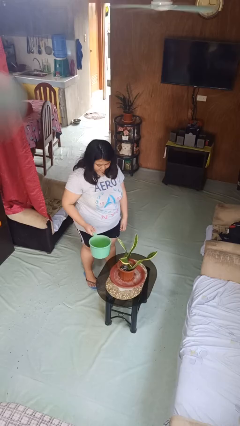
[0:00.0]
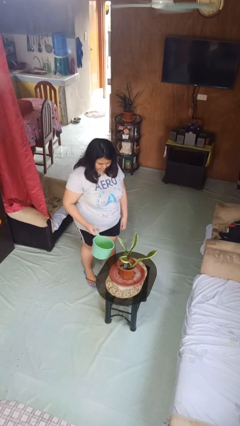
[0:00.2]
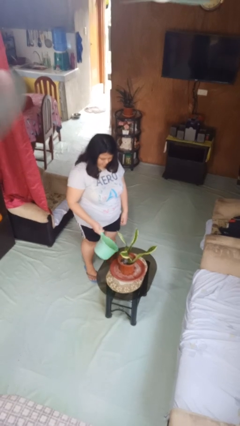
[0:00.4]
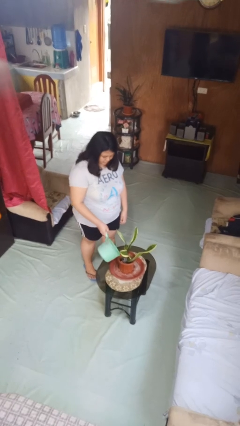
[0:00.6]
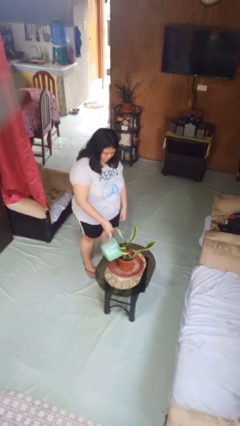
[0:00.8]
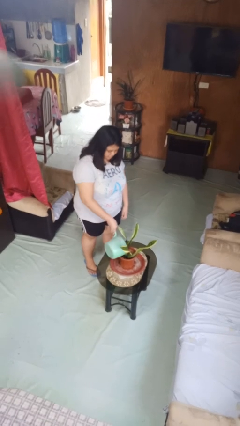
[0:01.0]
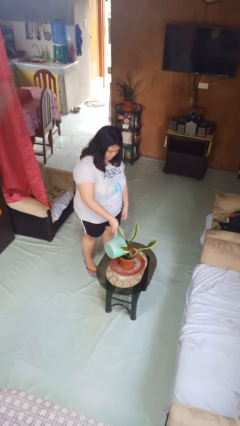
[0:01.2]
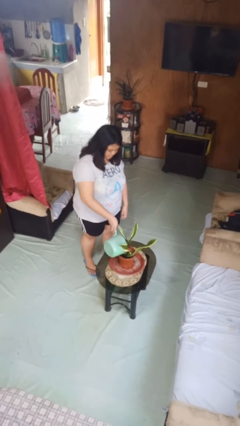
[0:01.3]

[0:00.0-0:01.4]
person waters houseplant

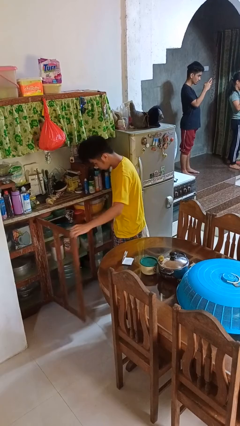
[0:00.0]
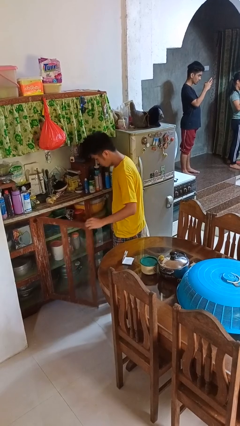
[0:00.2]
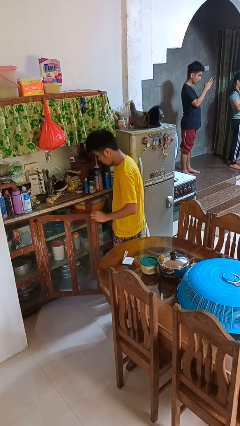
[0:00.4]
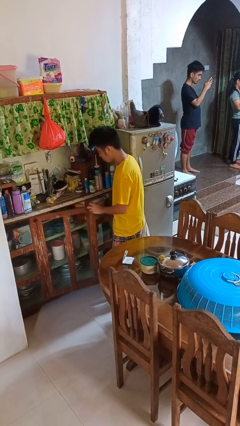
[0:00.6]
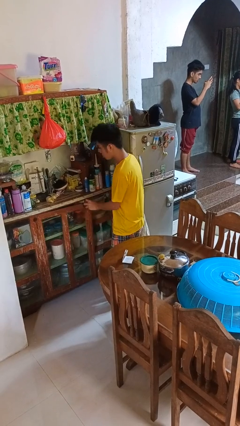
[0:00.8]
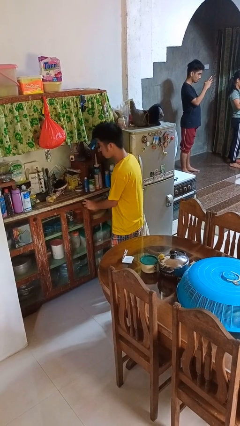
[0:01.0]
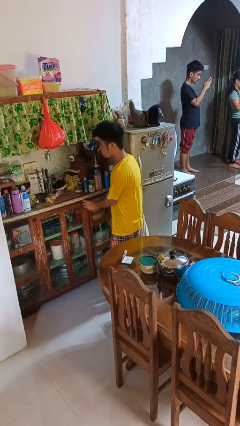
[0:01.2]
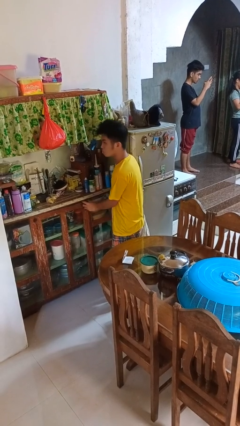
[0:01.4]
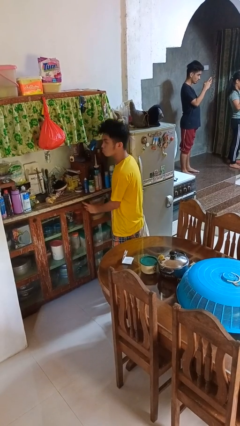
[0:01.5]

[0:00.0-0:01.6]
person closes cabinet

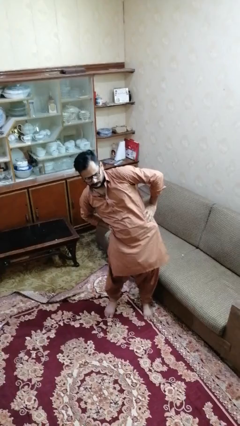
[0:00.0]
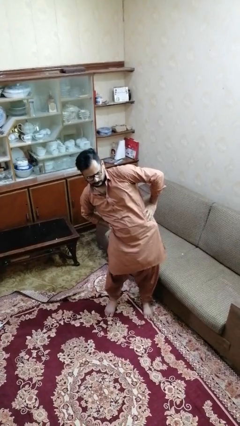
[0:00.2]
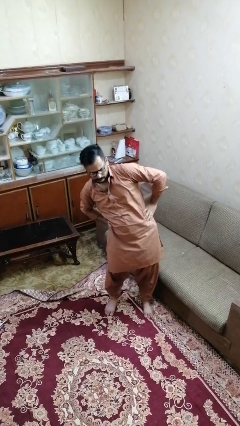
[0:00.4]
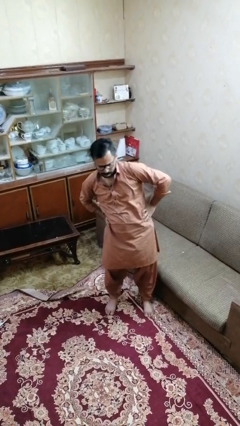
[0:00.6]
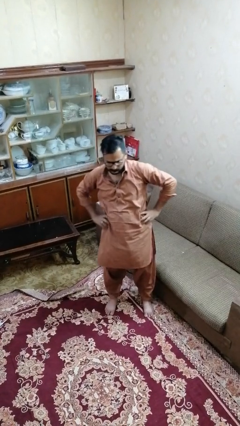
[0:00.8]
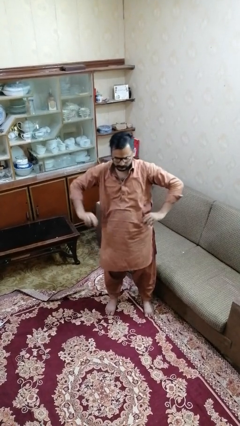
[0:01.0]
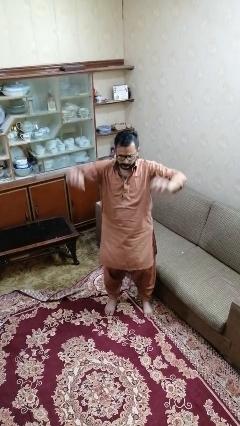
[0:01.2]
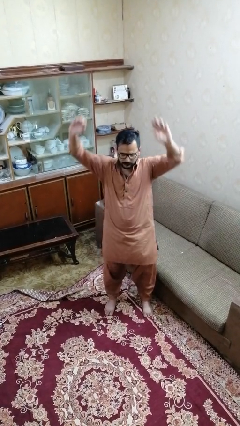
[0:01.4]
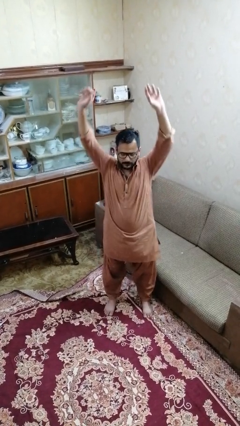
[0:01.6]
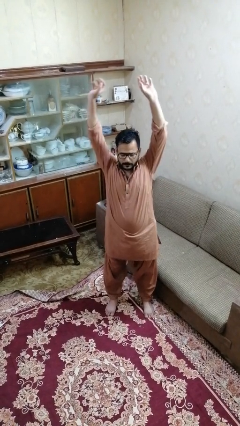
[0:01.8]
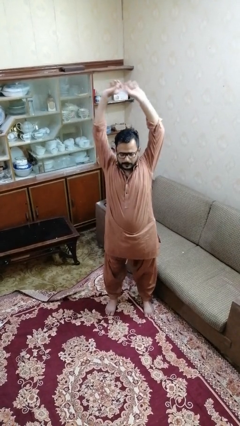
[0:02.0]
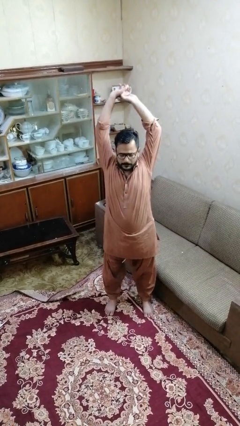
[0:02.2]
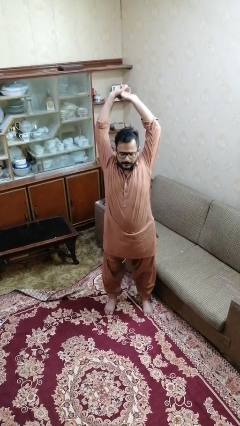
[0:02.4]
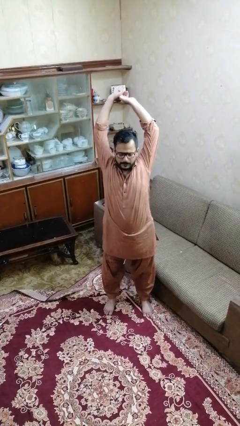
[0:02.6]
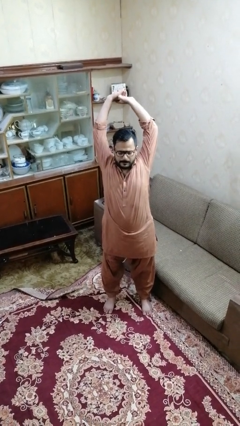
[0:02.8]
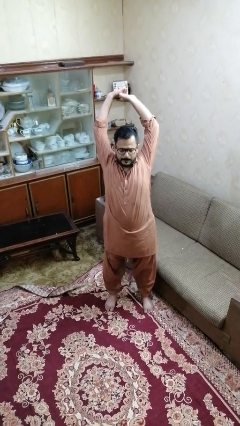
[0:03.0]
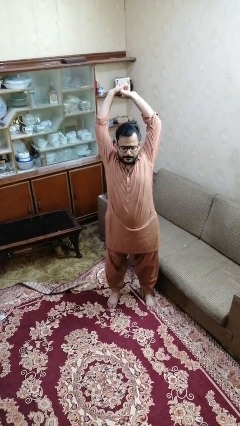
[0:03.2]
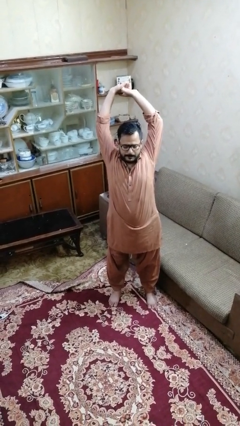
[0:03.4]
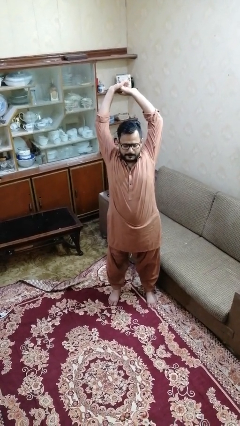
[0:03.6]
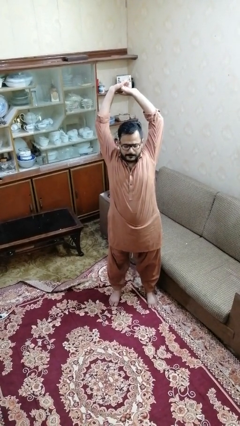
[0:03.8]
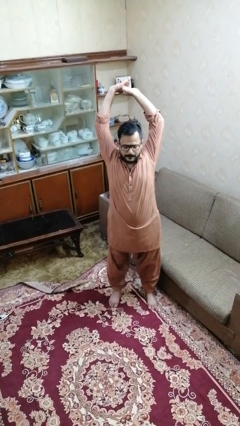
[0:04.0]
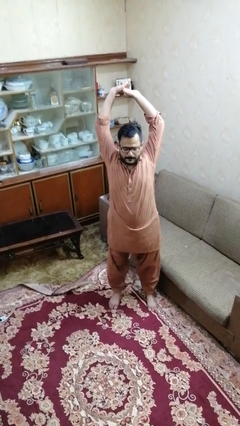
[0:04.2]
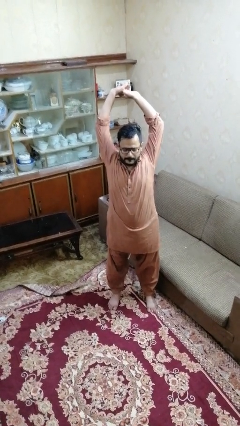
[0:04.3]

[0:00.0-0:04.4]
person stretches arms over head

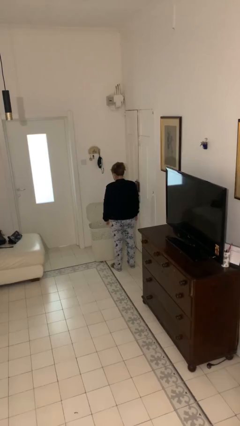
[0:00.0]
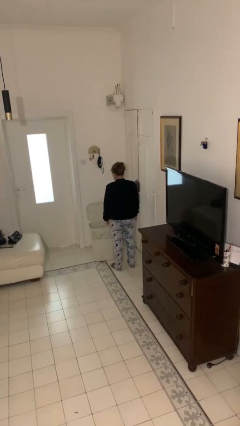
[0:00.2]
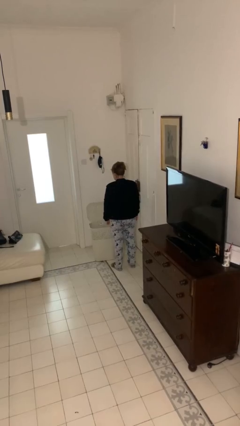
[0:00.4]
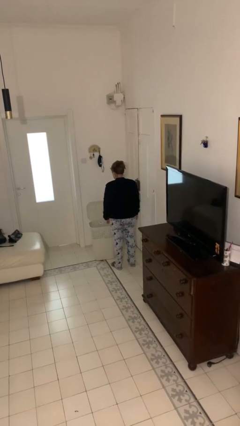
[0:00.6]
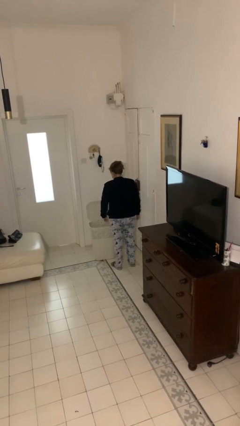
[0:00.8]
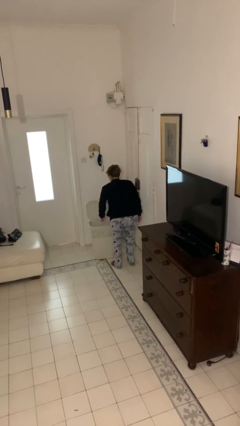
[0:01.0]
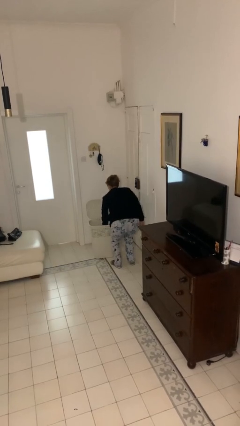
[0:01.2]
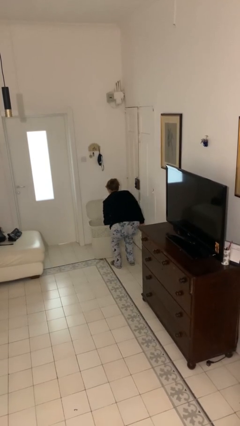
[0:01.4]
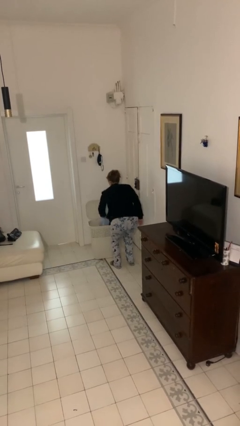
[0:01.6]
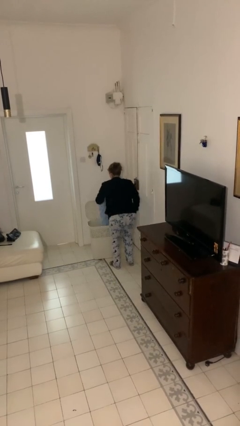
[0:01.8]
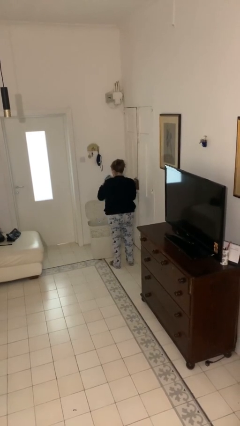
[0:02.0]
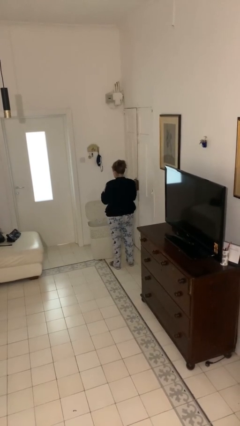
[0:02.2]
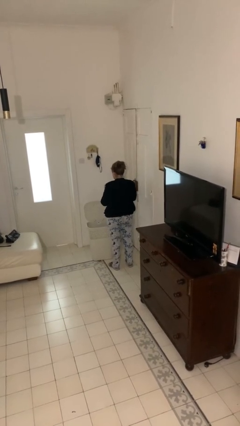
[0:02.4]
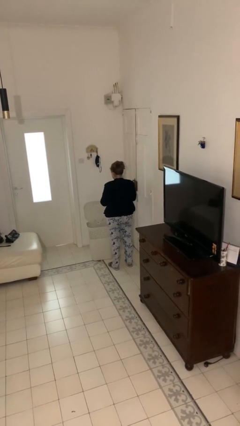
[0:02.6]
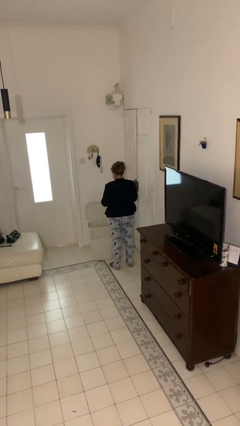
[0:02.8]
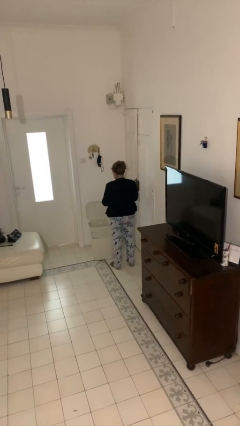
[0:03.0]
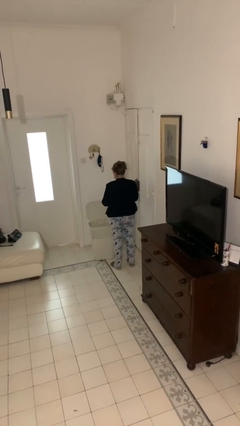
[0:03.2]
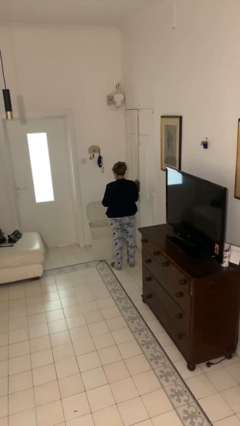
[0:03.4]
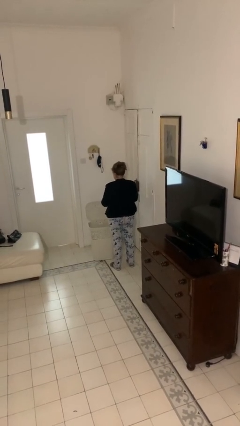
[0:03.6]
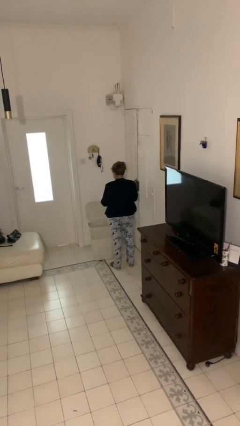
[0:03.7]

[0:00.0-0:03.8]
person takes object from basket

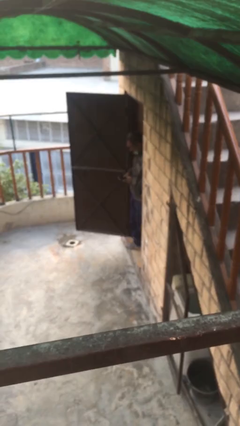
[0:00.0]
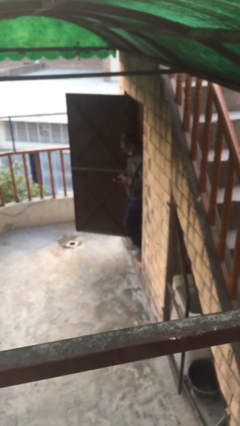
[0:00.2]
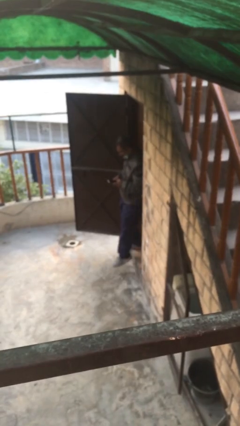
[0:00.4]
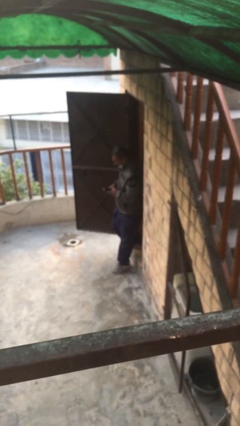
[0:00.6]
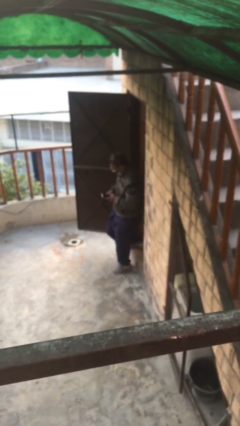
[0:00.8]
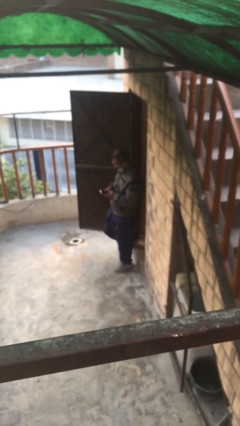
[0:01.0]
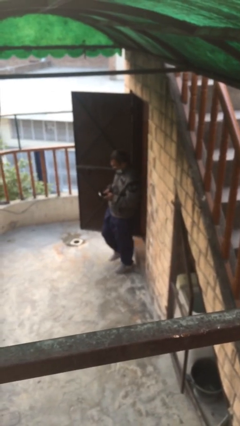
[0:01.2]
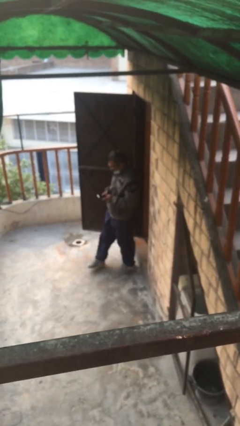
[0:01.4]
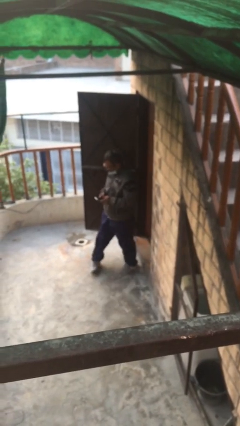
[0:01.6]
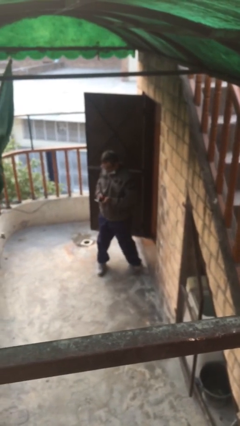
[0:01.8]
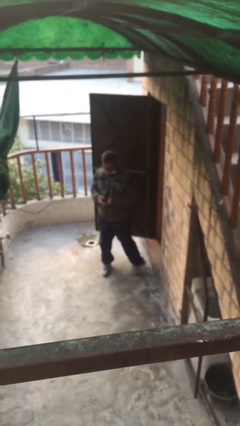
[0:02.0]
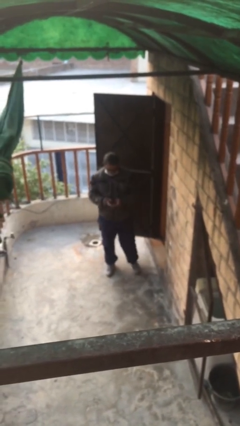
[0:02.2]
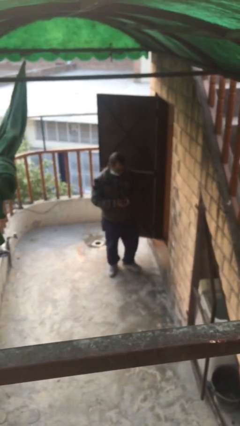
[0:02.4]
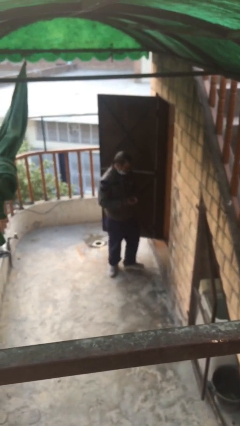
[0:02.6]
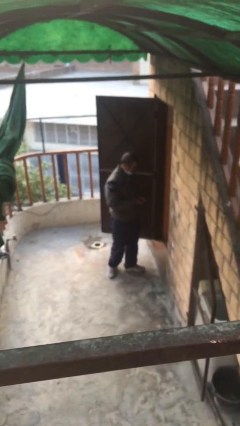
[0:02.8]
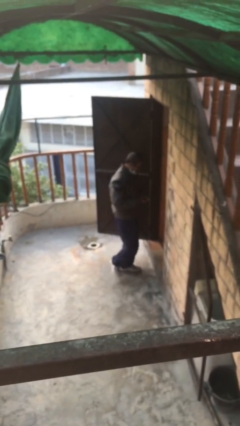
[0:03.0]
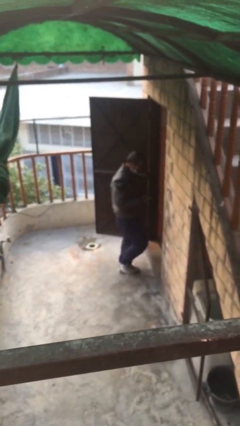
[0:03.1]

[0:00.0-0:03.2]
person enters scene through structure

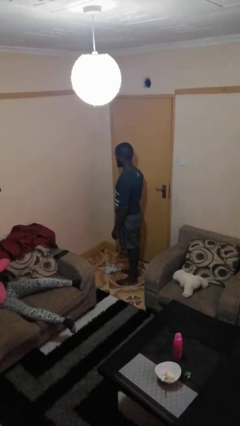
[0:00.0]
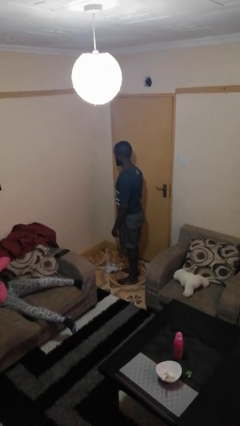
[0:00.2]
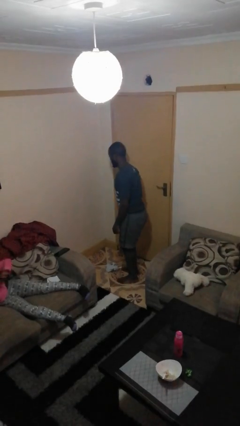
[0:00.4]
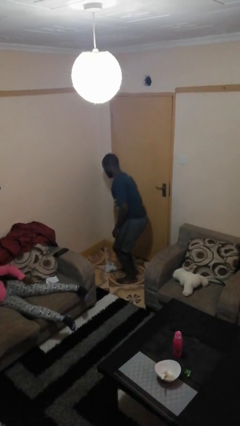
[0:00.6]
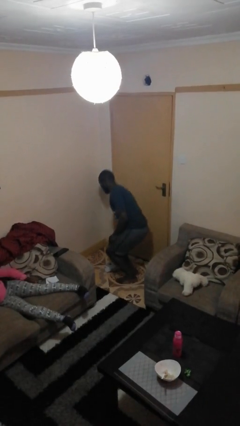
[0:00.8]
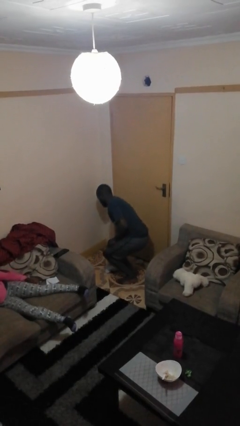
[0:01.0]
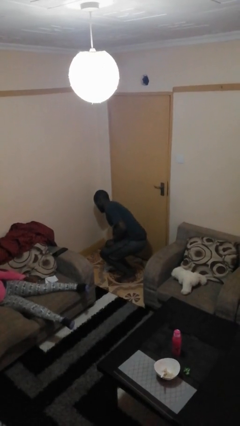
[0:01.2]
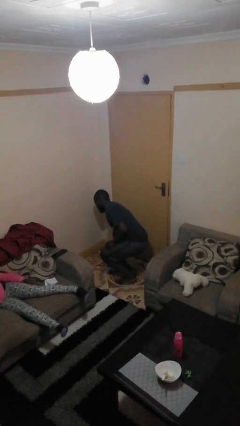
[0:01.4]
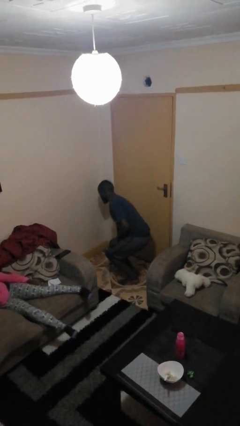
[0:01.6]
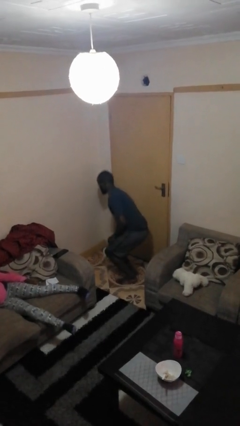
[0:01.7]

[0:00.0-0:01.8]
person picks up object from floor

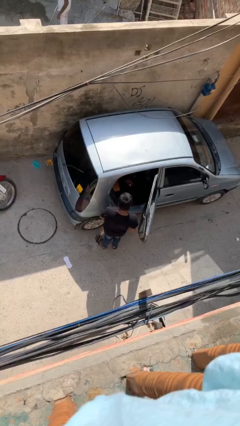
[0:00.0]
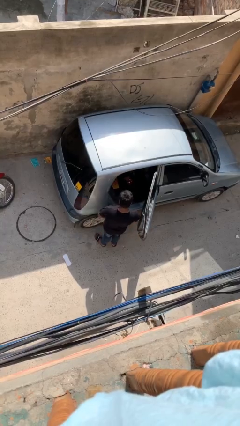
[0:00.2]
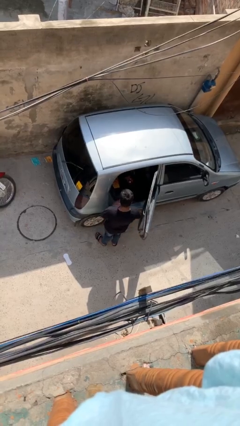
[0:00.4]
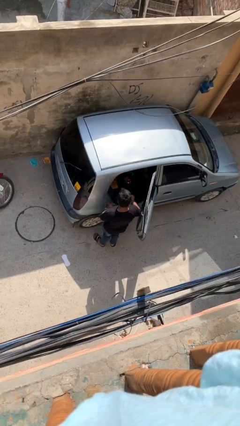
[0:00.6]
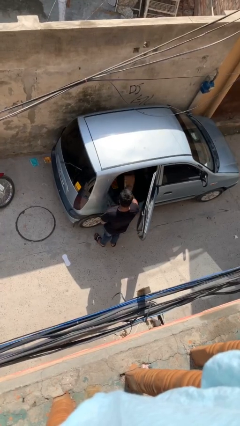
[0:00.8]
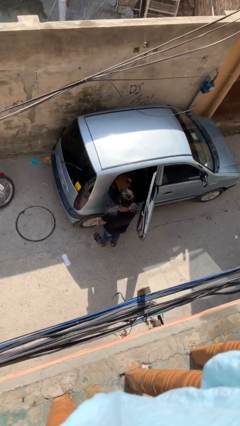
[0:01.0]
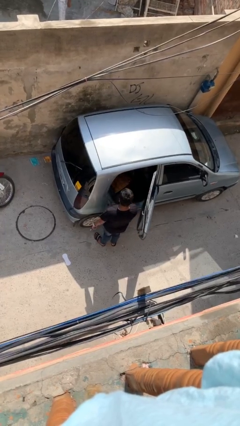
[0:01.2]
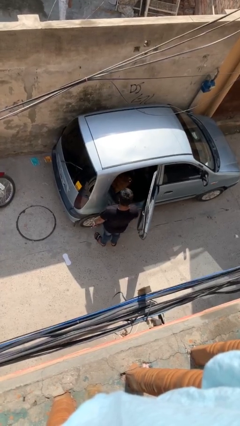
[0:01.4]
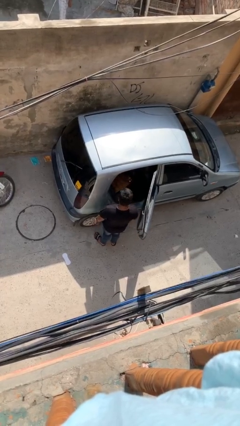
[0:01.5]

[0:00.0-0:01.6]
person loads car
